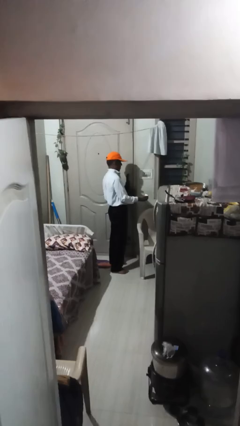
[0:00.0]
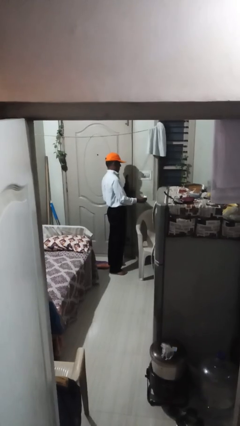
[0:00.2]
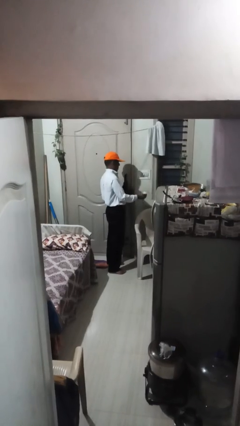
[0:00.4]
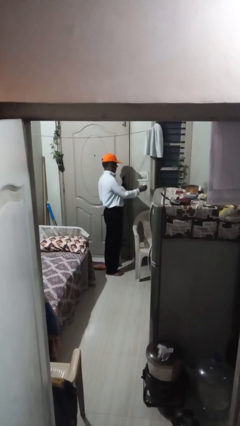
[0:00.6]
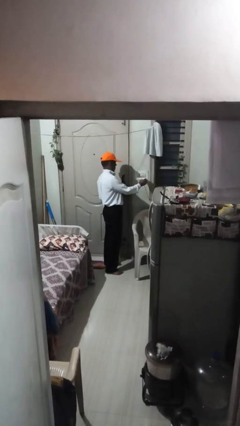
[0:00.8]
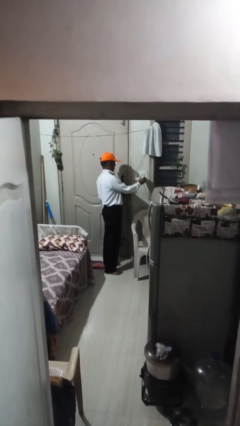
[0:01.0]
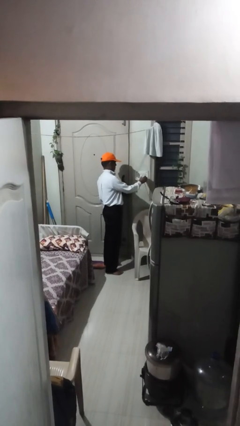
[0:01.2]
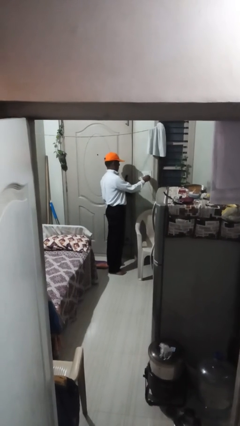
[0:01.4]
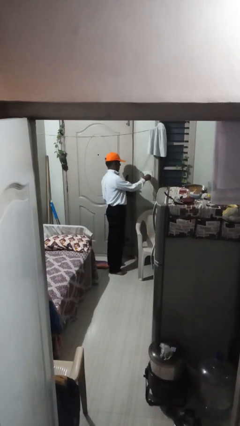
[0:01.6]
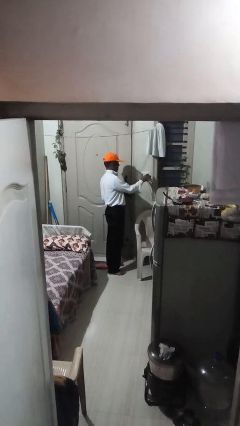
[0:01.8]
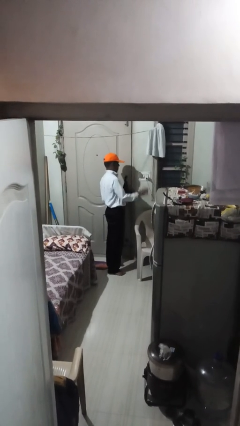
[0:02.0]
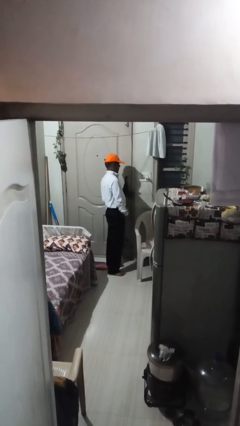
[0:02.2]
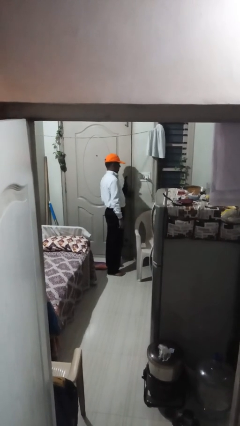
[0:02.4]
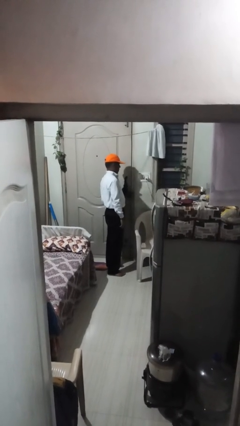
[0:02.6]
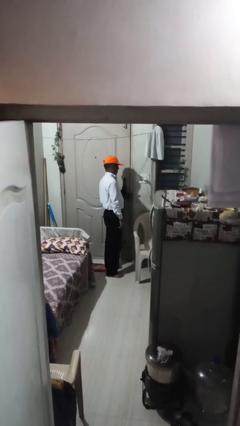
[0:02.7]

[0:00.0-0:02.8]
person plugs into electrical socket

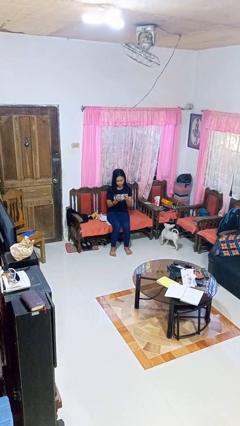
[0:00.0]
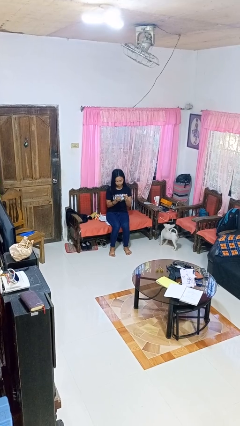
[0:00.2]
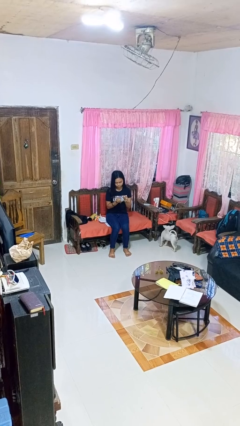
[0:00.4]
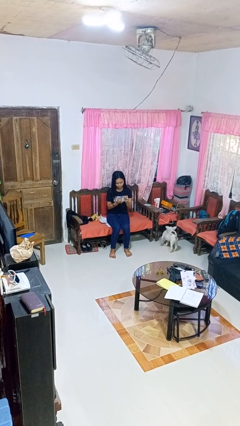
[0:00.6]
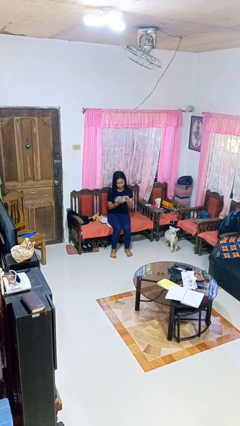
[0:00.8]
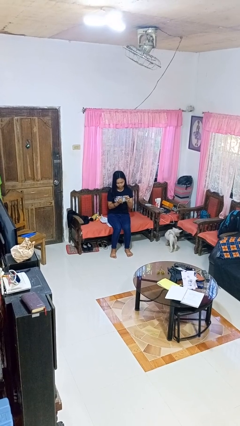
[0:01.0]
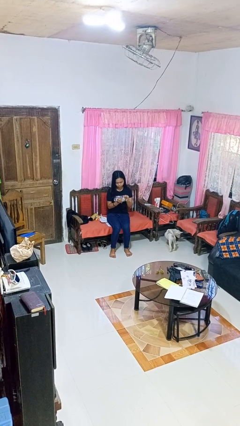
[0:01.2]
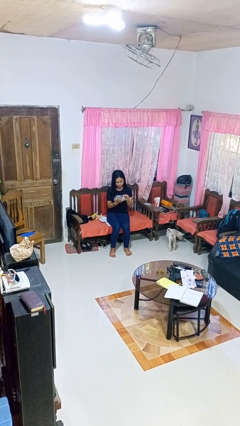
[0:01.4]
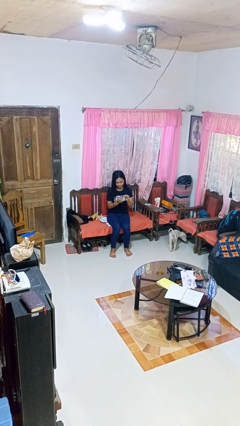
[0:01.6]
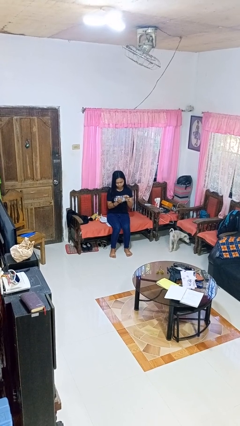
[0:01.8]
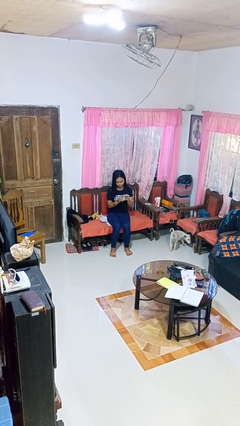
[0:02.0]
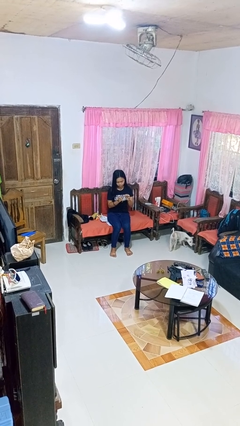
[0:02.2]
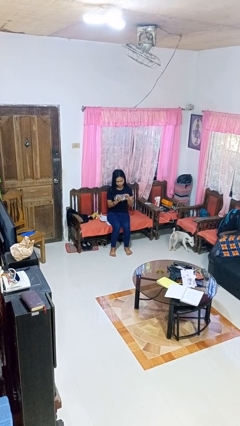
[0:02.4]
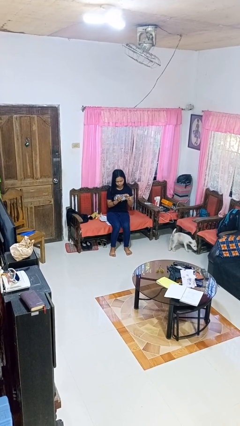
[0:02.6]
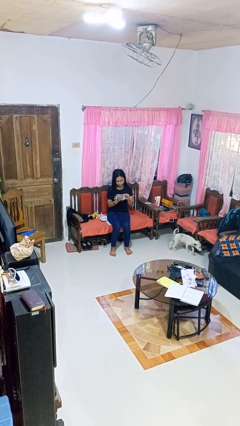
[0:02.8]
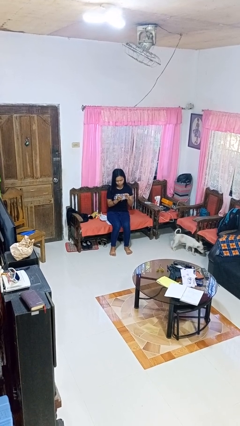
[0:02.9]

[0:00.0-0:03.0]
person clips fingernails

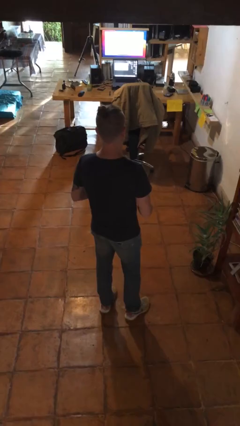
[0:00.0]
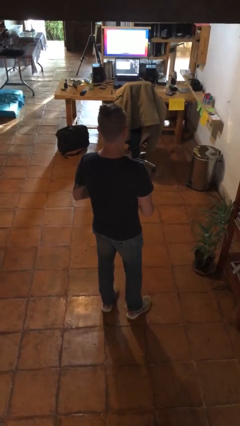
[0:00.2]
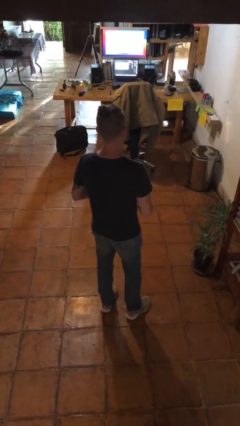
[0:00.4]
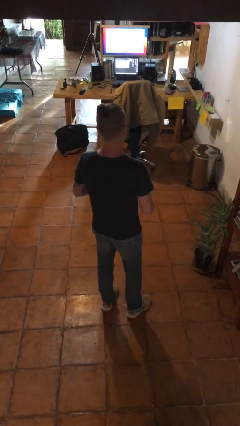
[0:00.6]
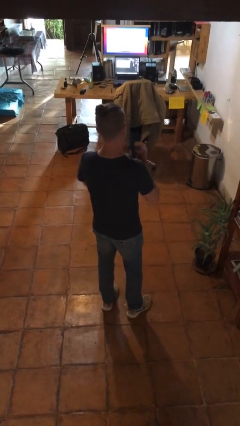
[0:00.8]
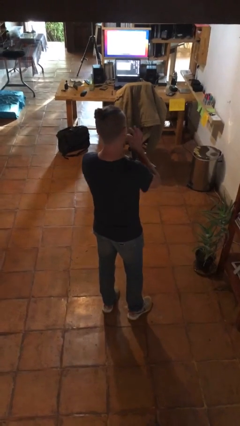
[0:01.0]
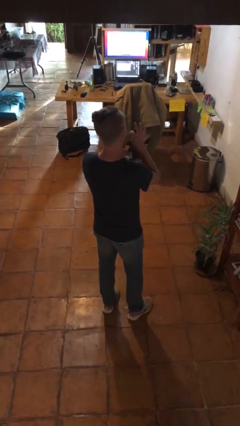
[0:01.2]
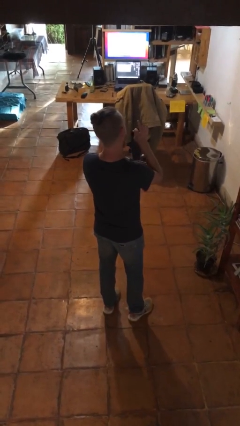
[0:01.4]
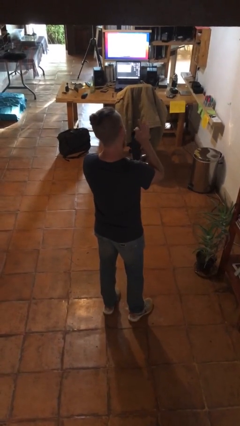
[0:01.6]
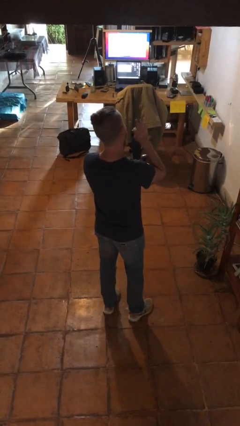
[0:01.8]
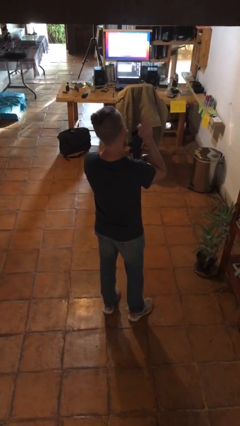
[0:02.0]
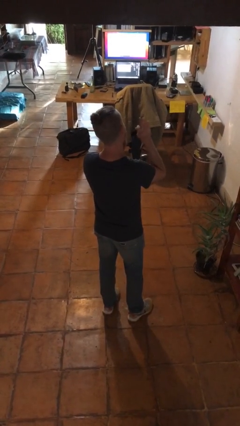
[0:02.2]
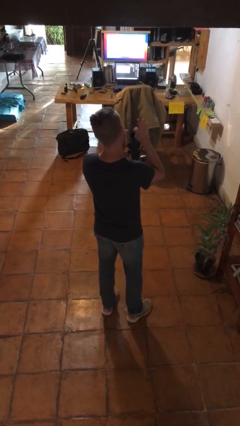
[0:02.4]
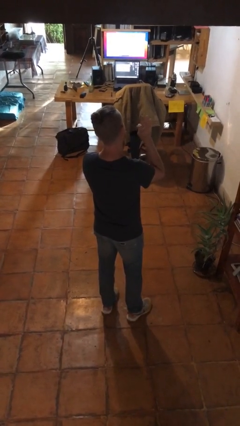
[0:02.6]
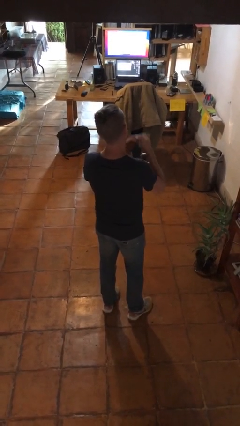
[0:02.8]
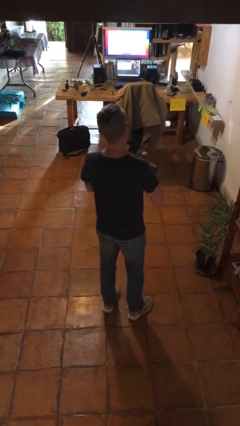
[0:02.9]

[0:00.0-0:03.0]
person flosses

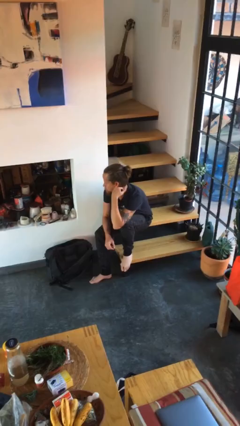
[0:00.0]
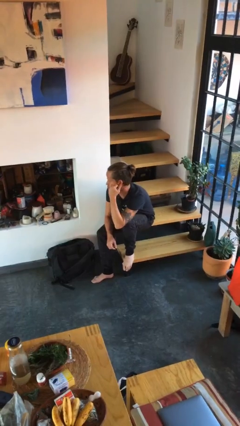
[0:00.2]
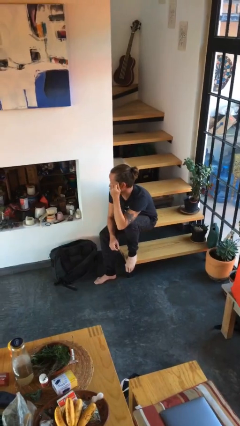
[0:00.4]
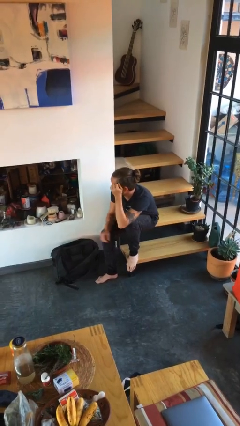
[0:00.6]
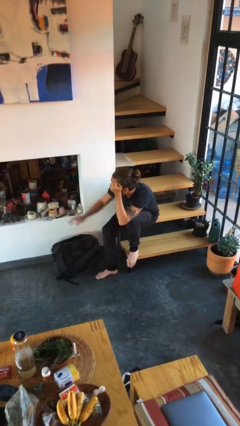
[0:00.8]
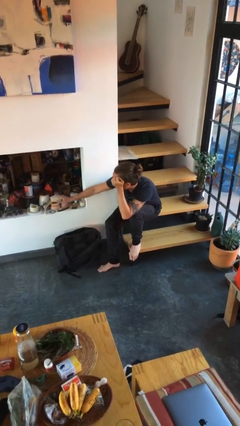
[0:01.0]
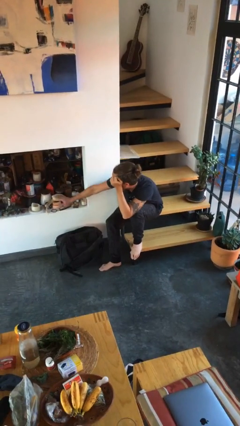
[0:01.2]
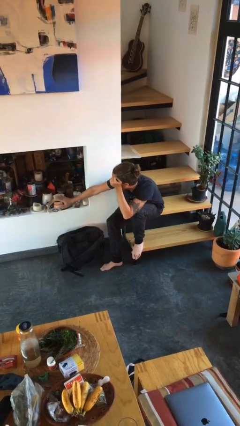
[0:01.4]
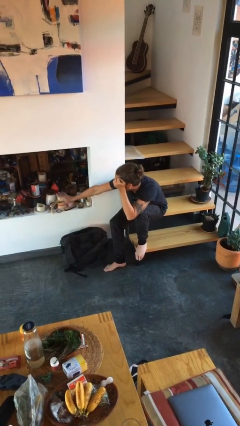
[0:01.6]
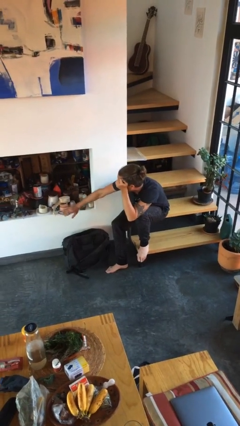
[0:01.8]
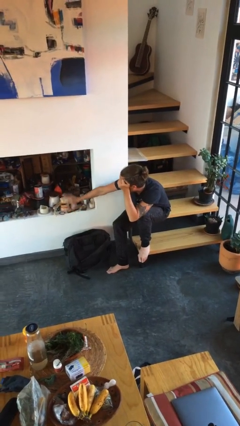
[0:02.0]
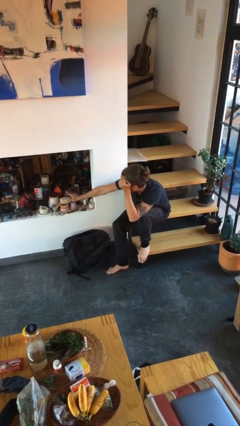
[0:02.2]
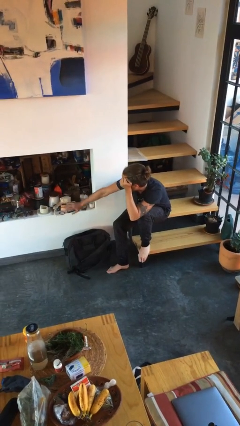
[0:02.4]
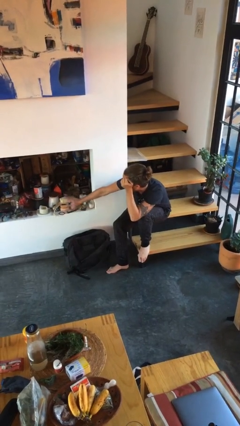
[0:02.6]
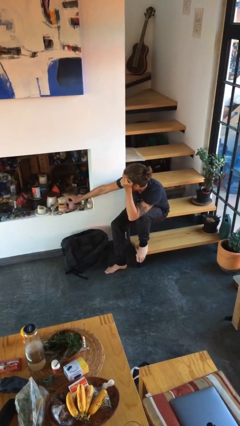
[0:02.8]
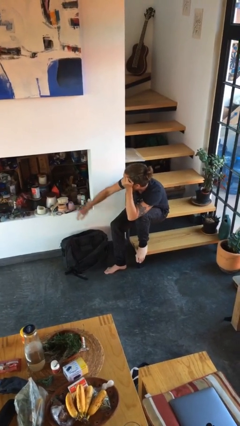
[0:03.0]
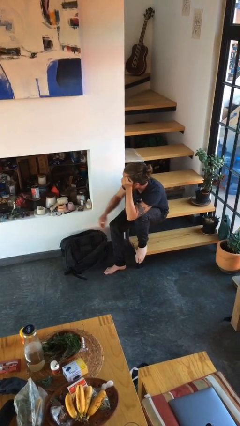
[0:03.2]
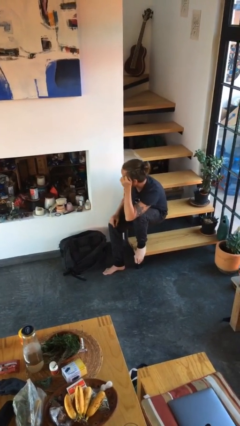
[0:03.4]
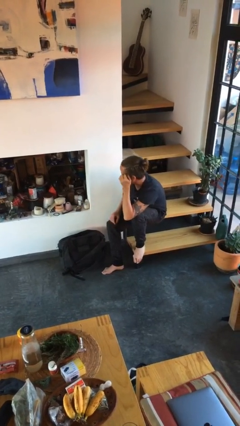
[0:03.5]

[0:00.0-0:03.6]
person waves hand over object

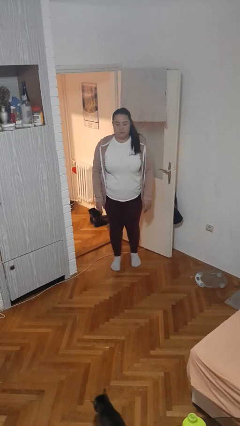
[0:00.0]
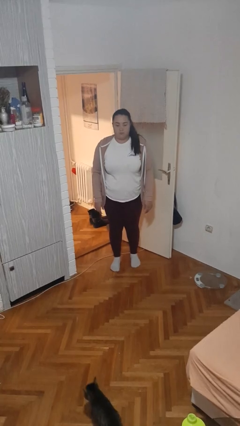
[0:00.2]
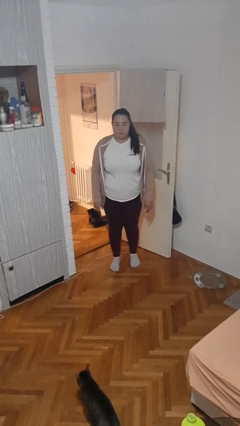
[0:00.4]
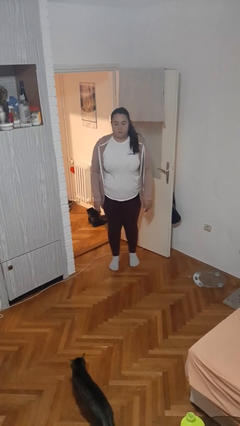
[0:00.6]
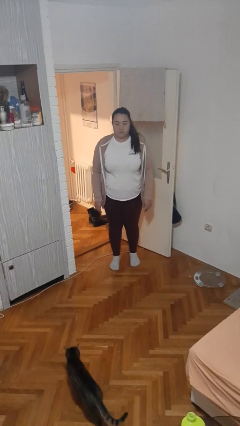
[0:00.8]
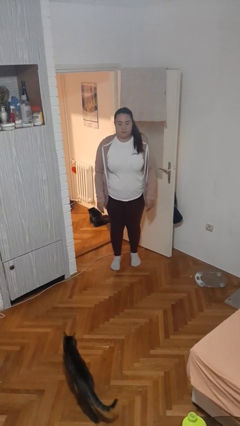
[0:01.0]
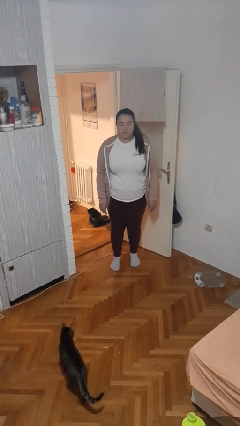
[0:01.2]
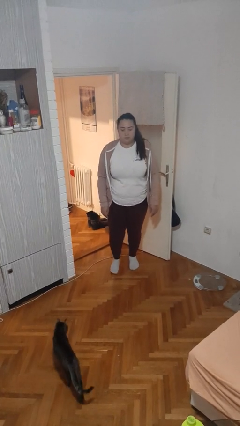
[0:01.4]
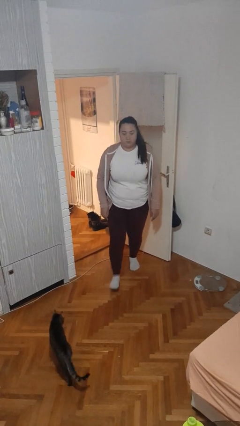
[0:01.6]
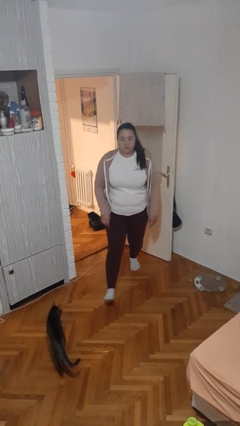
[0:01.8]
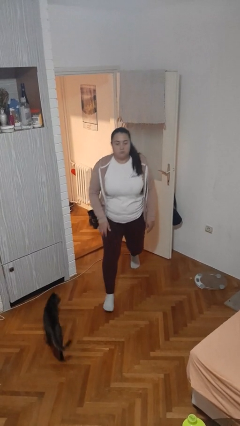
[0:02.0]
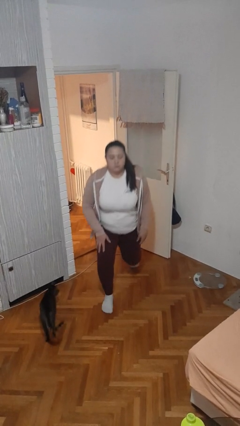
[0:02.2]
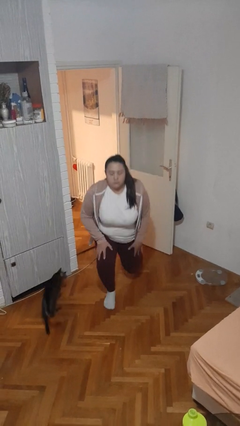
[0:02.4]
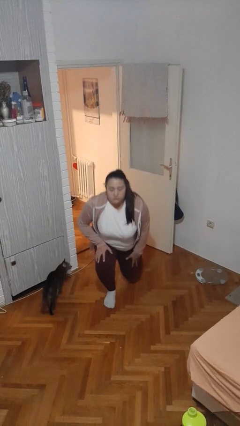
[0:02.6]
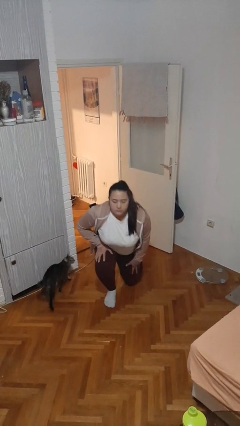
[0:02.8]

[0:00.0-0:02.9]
person kneels

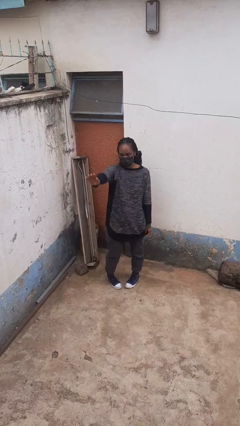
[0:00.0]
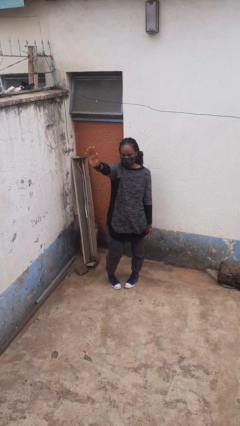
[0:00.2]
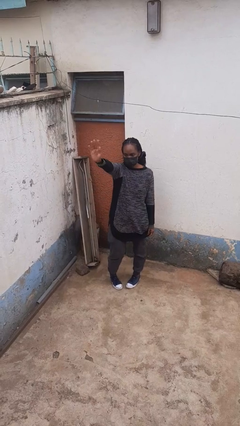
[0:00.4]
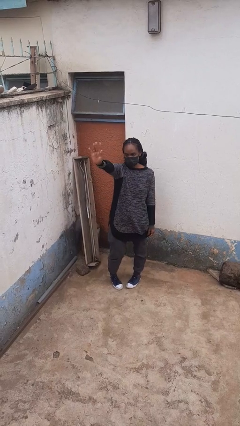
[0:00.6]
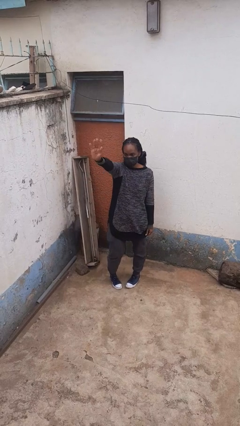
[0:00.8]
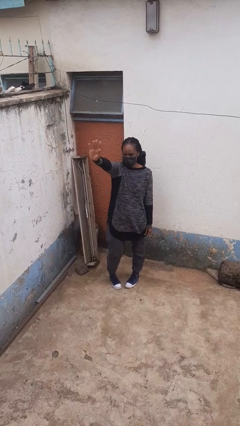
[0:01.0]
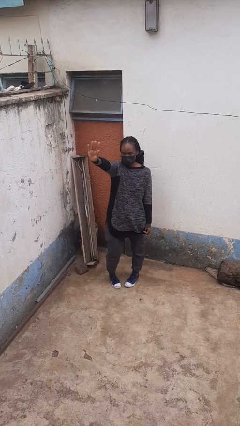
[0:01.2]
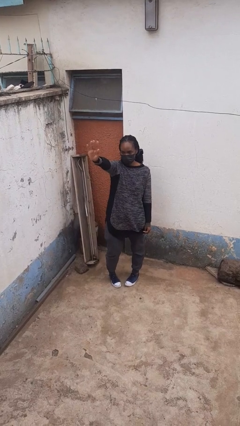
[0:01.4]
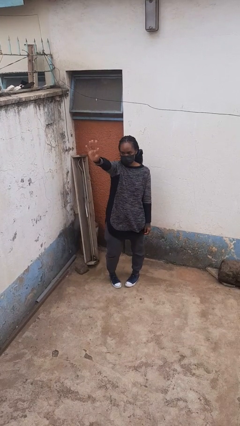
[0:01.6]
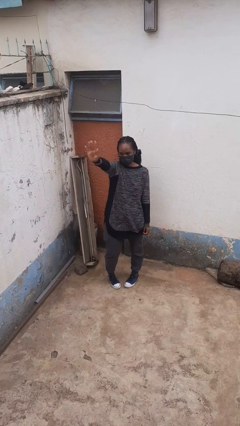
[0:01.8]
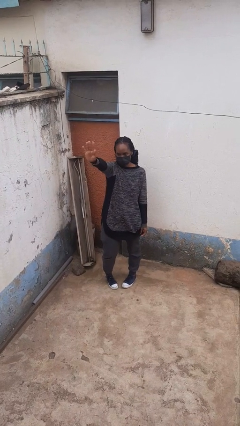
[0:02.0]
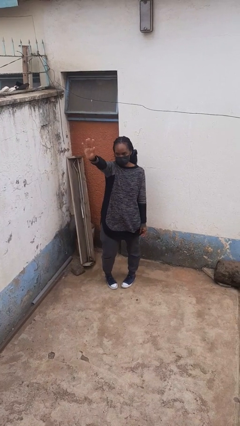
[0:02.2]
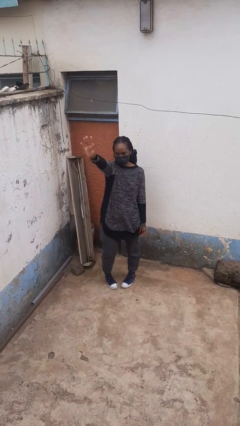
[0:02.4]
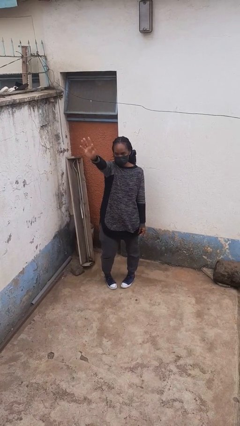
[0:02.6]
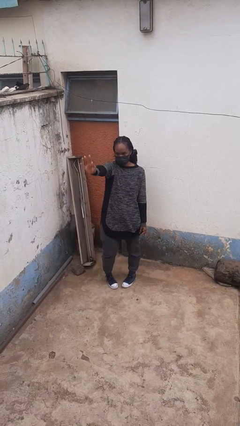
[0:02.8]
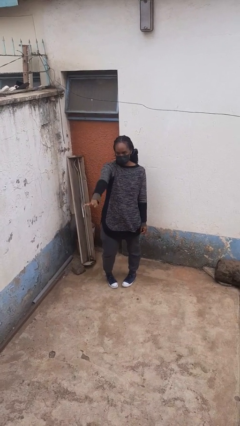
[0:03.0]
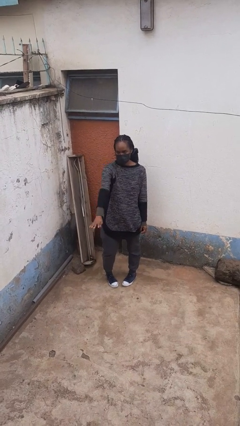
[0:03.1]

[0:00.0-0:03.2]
person waves at person
